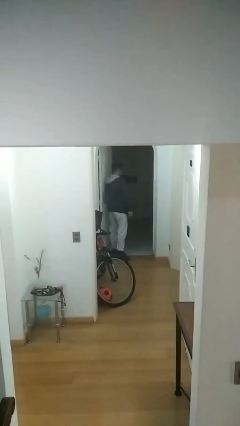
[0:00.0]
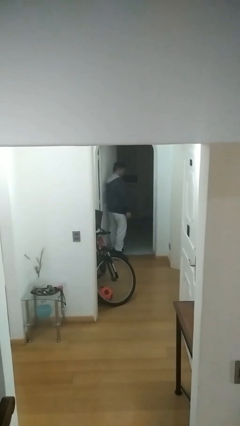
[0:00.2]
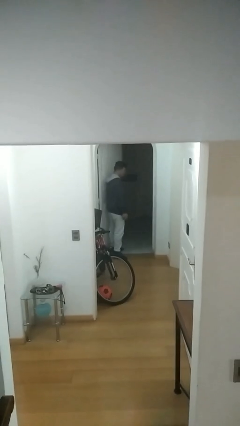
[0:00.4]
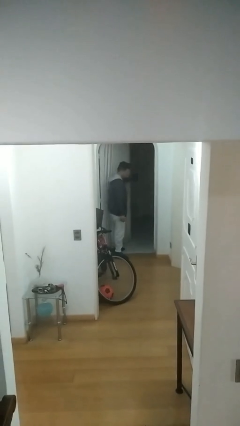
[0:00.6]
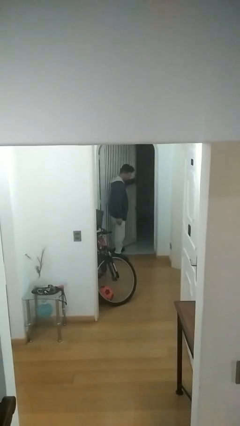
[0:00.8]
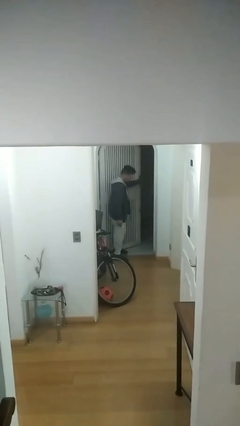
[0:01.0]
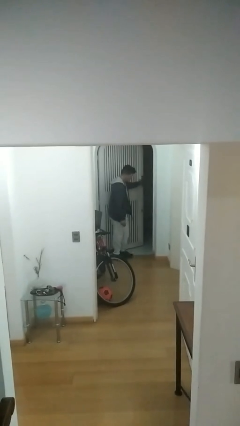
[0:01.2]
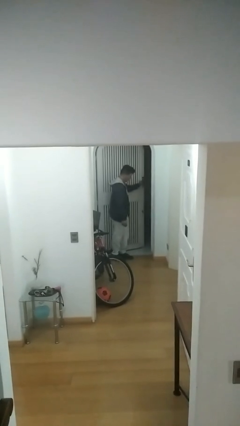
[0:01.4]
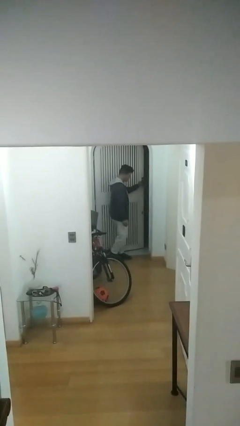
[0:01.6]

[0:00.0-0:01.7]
person closes facility door

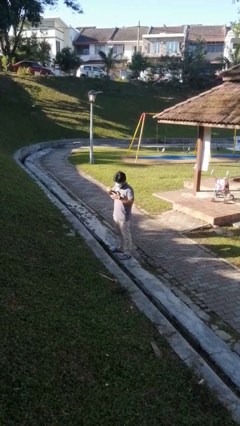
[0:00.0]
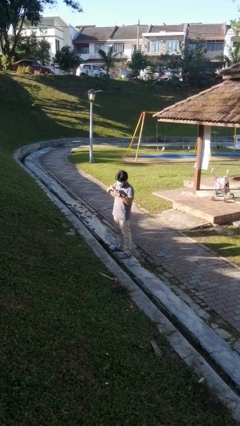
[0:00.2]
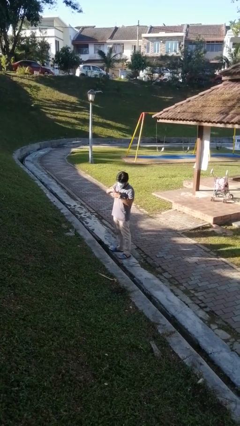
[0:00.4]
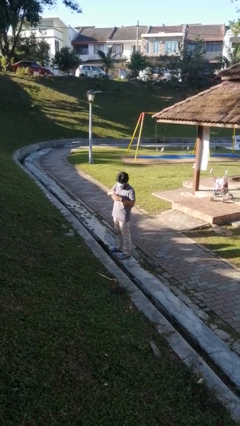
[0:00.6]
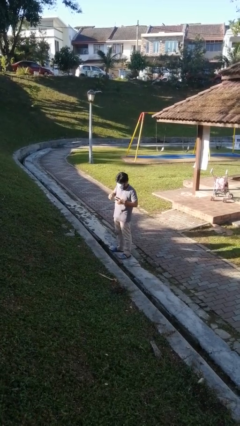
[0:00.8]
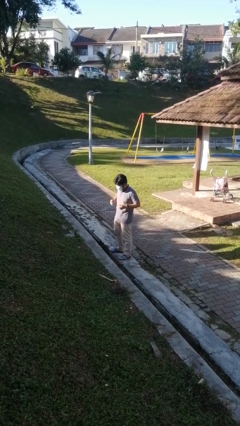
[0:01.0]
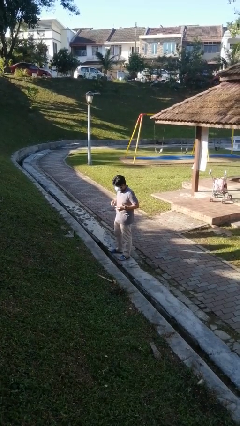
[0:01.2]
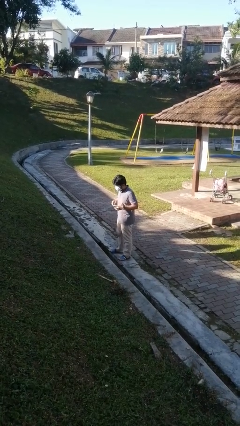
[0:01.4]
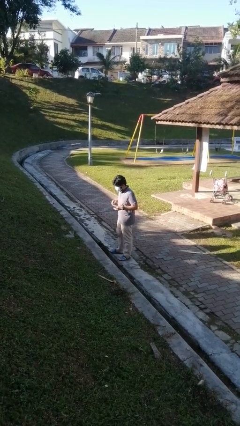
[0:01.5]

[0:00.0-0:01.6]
person puts on ring

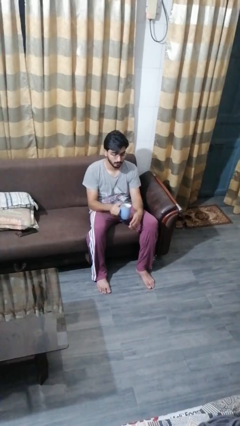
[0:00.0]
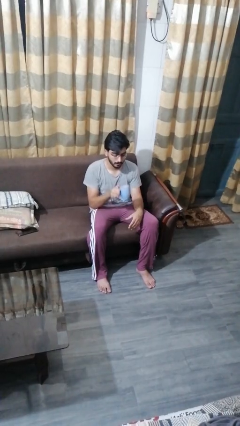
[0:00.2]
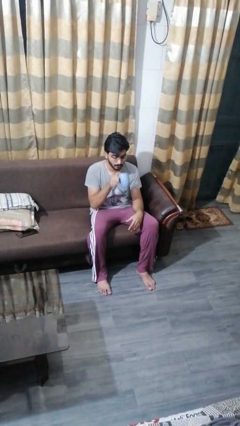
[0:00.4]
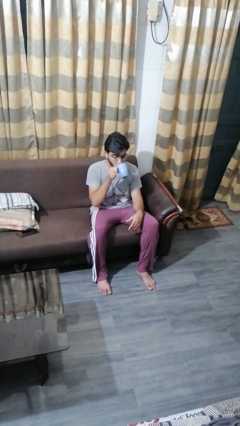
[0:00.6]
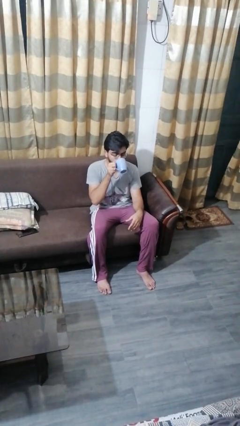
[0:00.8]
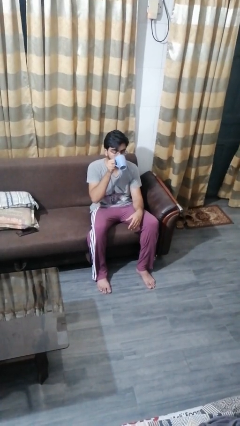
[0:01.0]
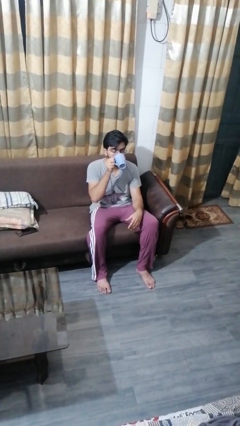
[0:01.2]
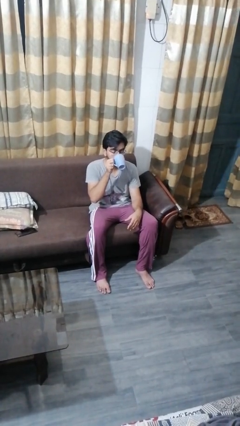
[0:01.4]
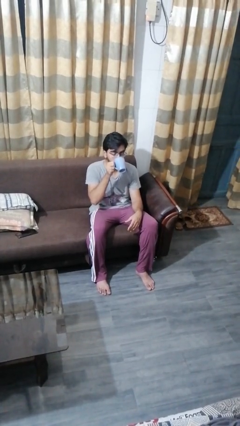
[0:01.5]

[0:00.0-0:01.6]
person drinks from mug

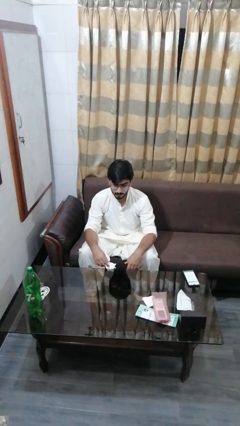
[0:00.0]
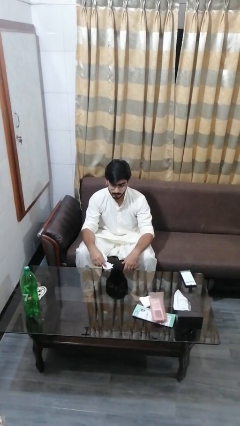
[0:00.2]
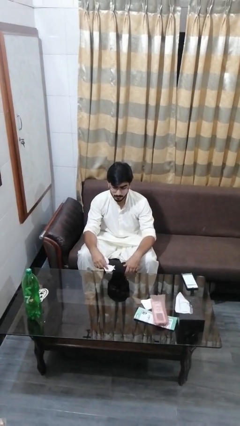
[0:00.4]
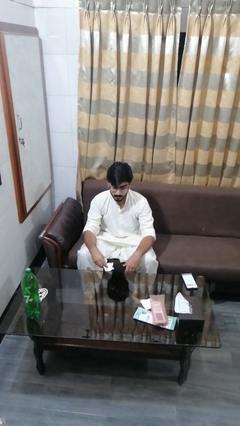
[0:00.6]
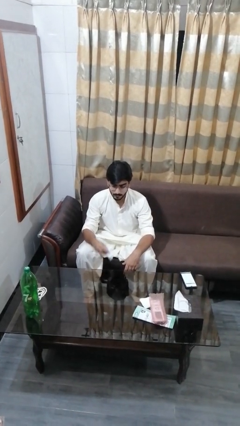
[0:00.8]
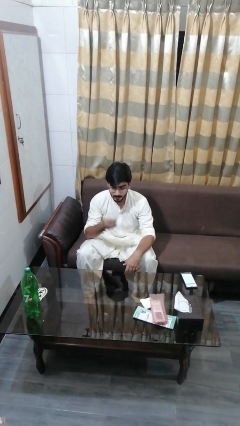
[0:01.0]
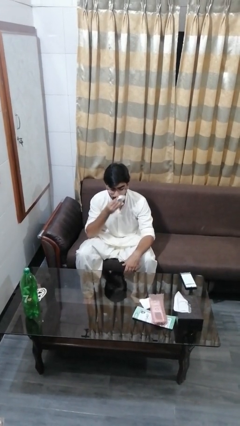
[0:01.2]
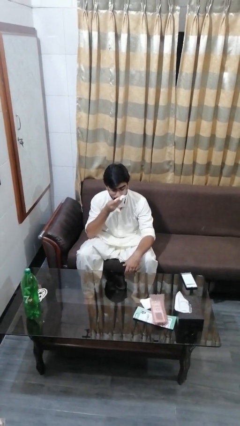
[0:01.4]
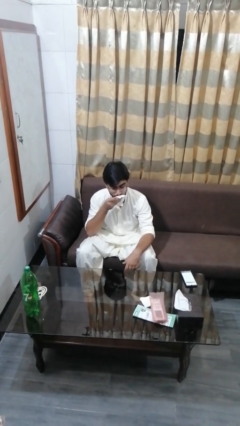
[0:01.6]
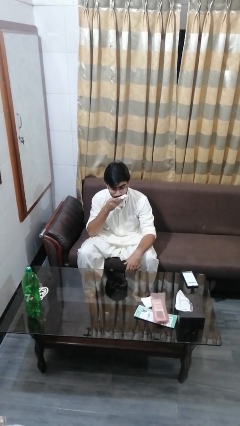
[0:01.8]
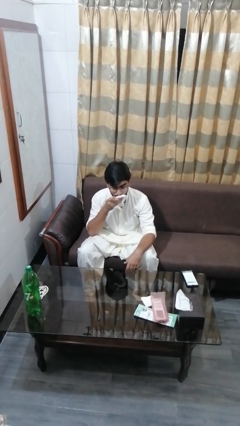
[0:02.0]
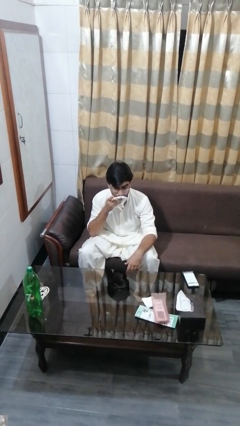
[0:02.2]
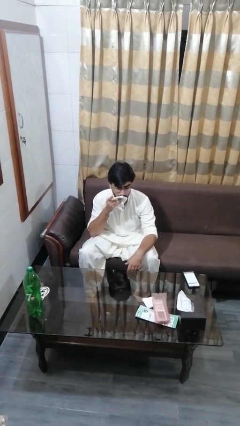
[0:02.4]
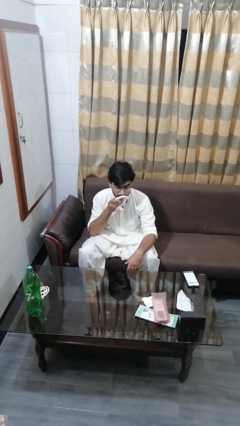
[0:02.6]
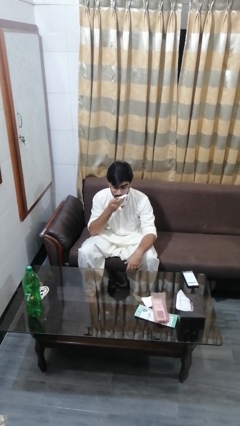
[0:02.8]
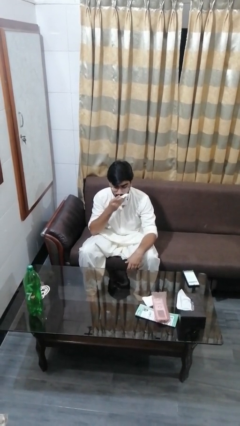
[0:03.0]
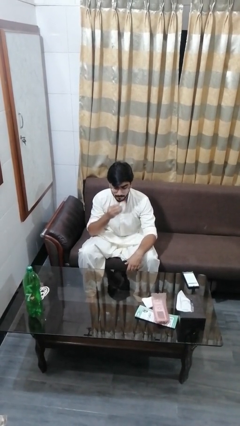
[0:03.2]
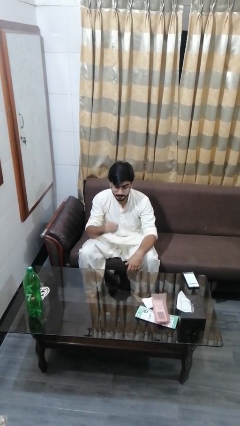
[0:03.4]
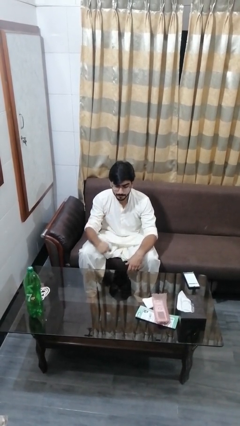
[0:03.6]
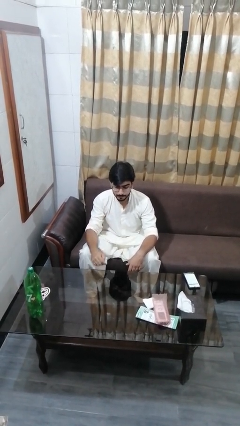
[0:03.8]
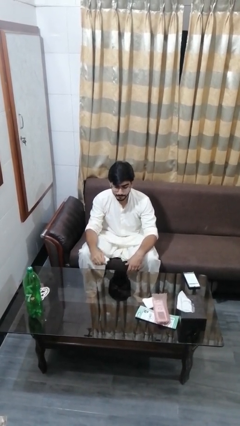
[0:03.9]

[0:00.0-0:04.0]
person wipes mouth with napkin

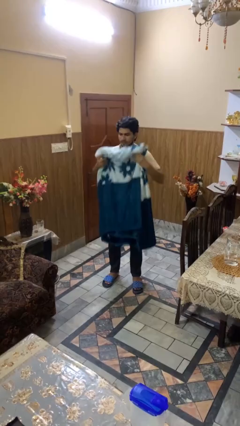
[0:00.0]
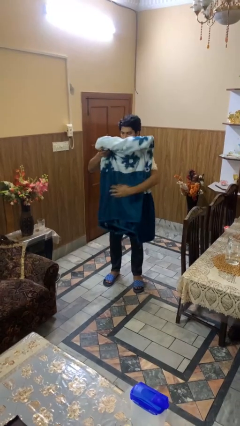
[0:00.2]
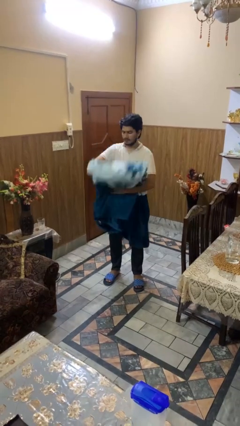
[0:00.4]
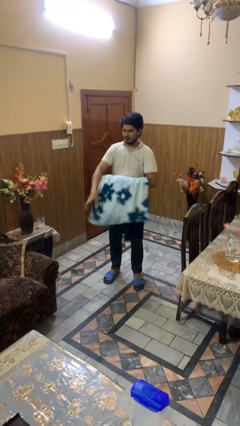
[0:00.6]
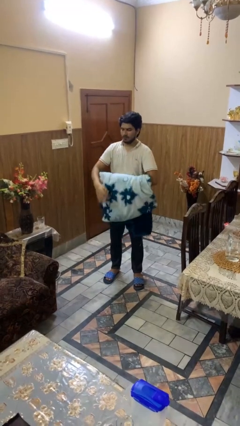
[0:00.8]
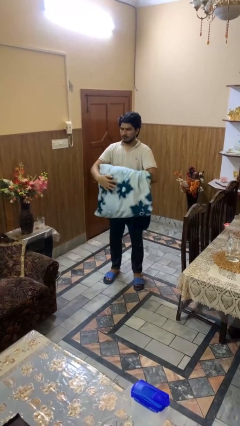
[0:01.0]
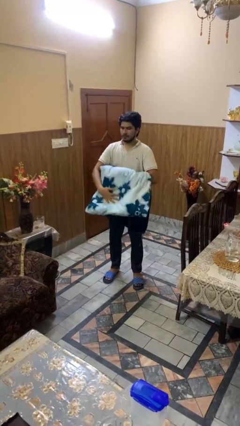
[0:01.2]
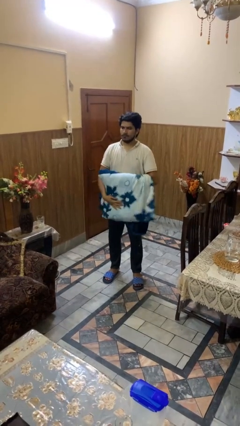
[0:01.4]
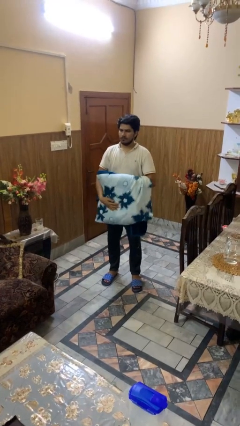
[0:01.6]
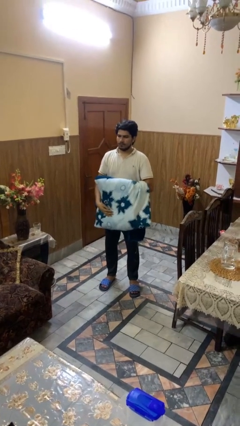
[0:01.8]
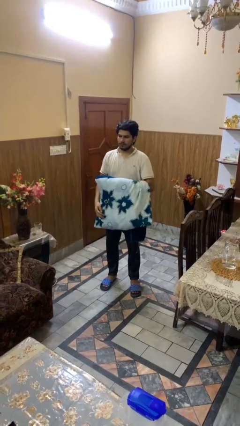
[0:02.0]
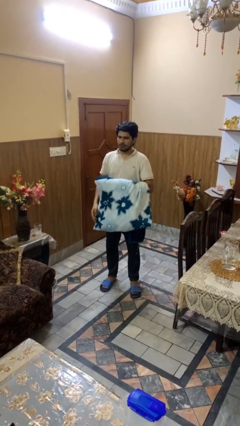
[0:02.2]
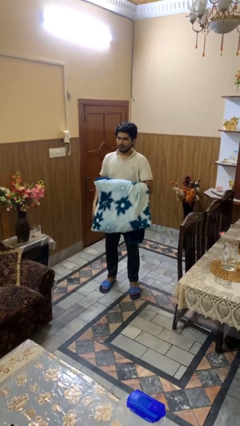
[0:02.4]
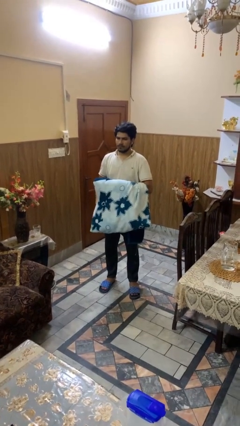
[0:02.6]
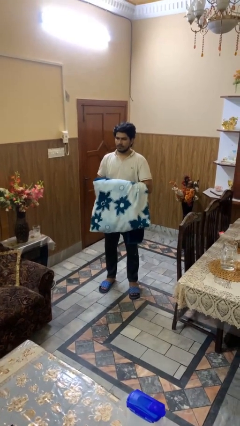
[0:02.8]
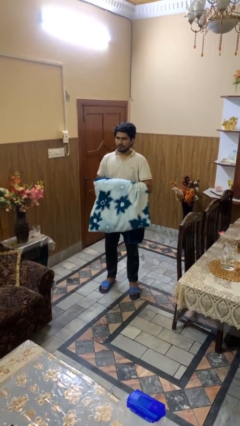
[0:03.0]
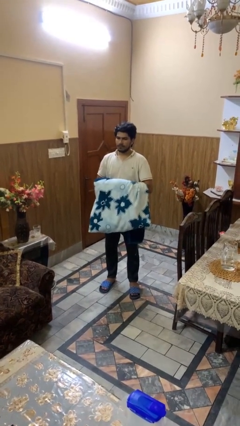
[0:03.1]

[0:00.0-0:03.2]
person folds blanket

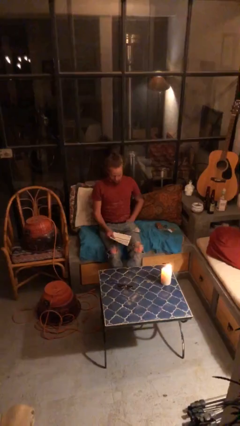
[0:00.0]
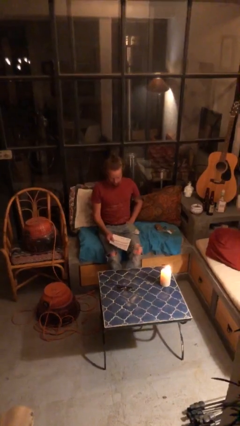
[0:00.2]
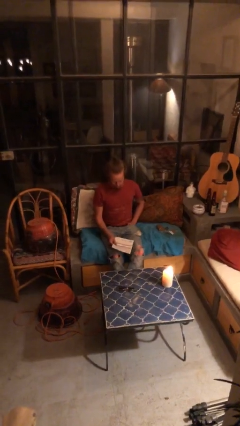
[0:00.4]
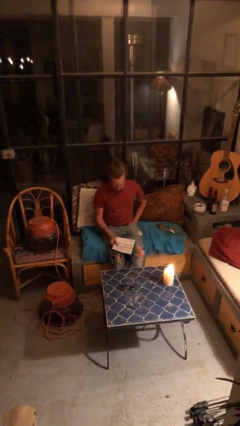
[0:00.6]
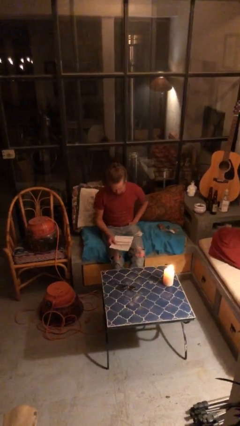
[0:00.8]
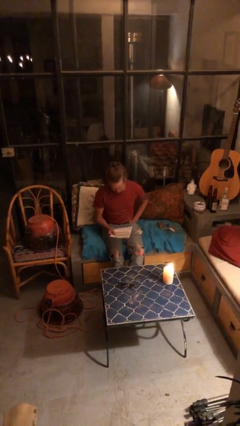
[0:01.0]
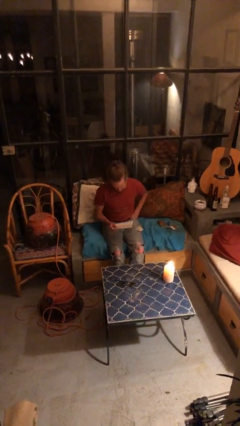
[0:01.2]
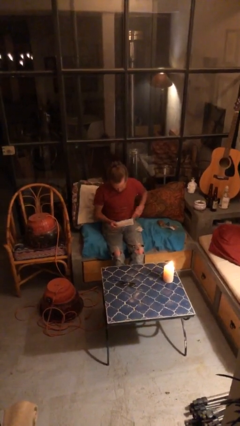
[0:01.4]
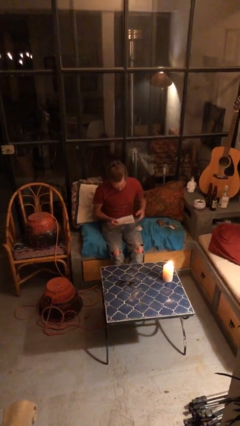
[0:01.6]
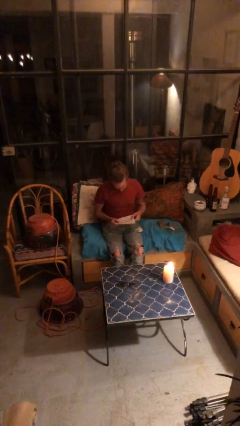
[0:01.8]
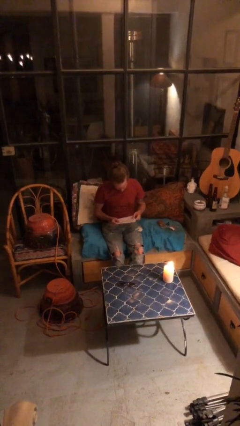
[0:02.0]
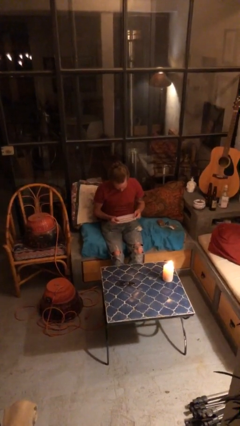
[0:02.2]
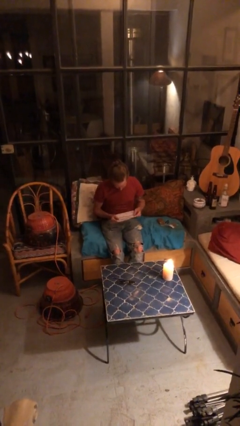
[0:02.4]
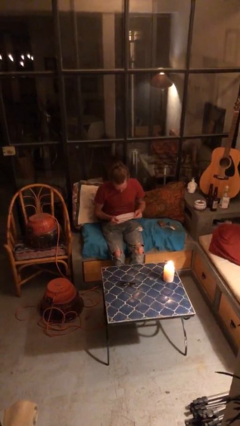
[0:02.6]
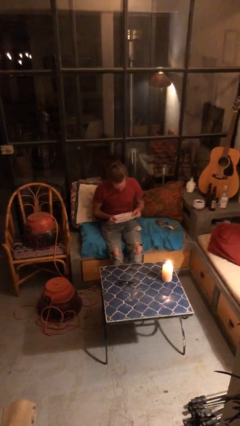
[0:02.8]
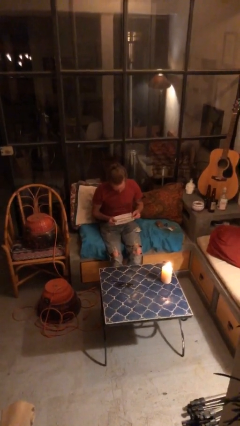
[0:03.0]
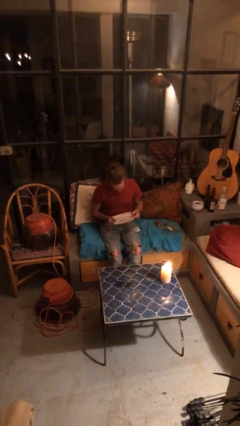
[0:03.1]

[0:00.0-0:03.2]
person reads document

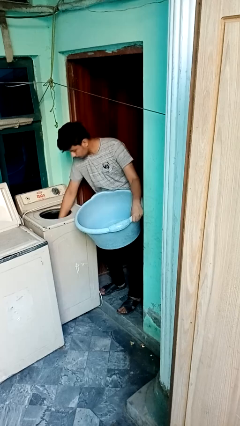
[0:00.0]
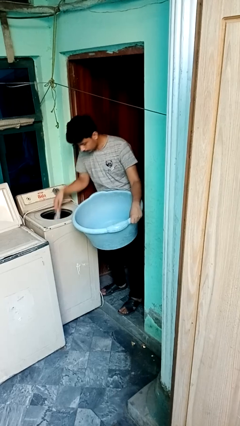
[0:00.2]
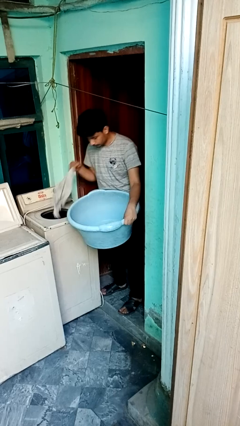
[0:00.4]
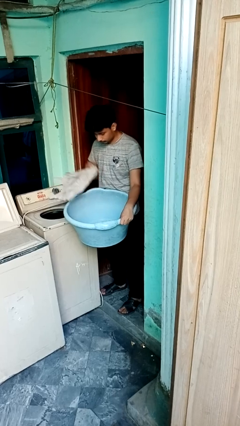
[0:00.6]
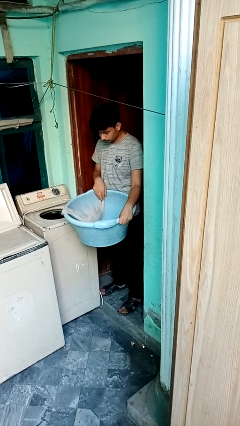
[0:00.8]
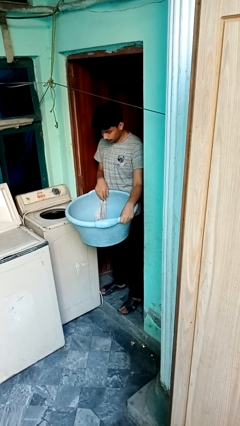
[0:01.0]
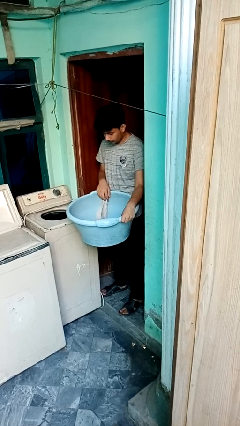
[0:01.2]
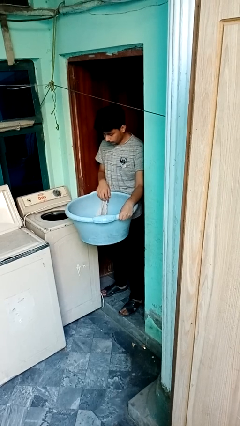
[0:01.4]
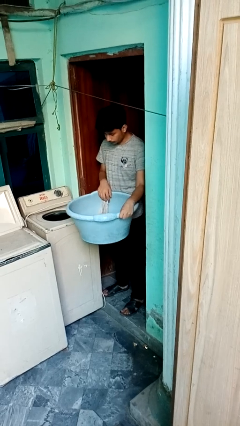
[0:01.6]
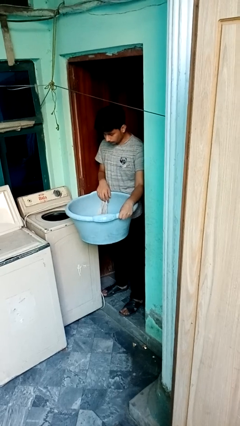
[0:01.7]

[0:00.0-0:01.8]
person unloads dryer
